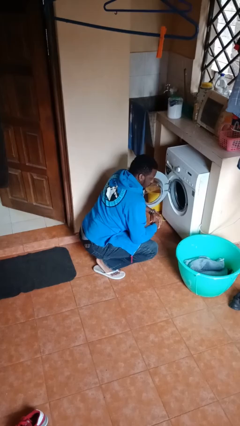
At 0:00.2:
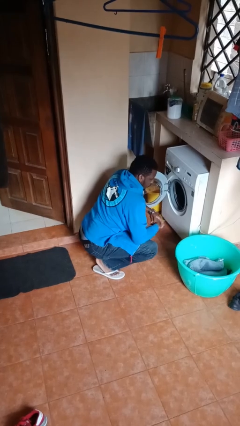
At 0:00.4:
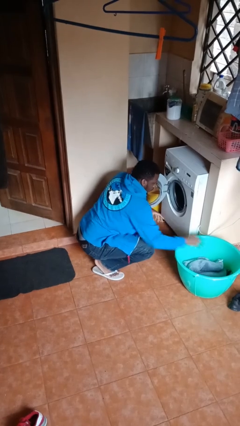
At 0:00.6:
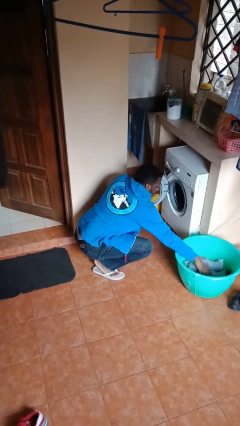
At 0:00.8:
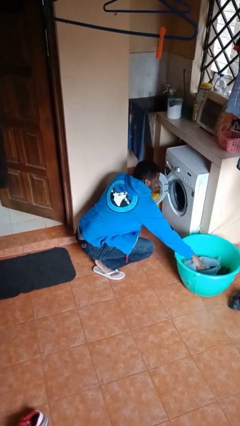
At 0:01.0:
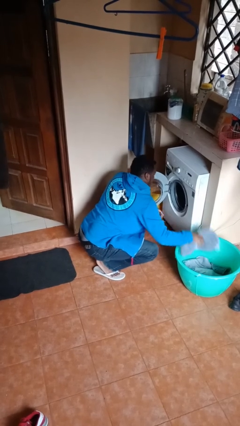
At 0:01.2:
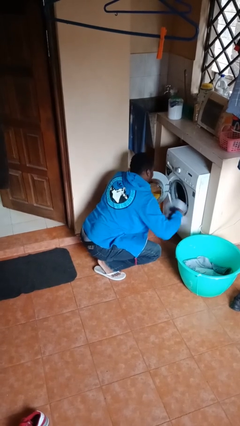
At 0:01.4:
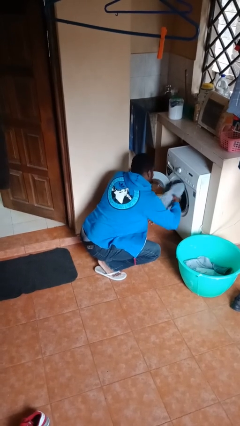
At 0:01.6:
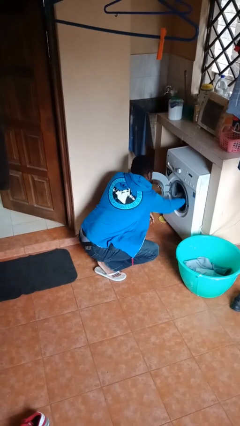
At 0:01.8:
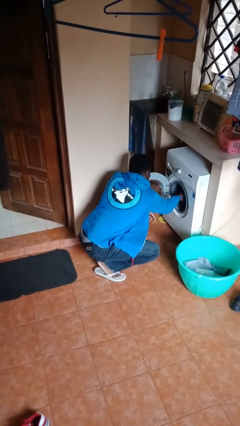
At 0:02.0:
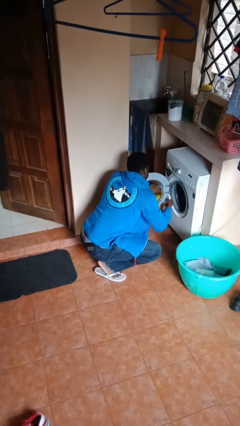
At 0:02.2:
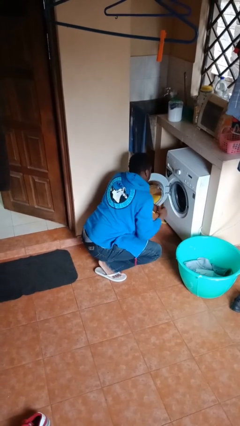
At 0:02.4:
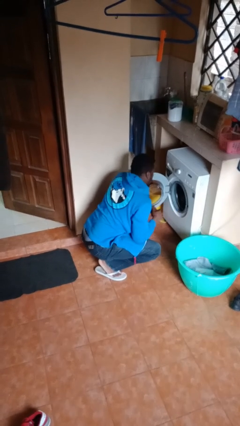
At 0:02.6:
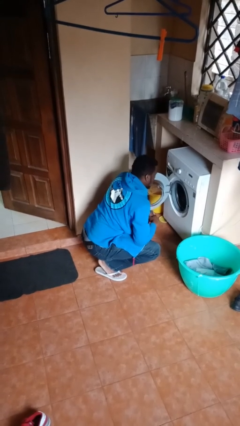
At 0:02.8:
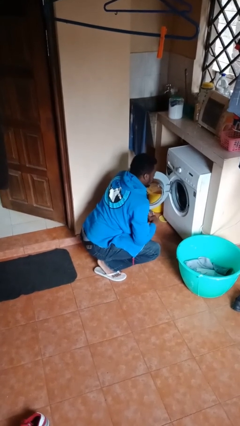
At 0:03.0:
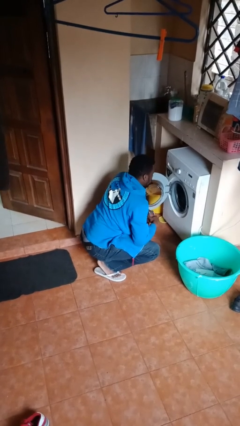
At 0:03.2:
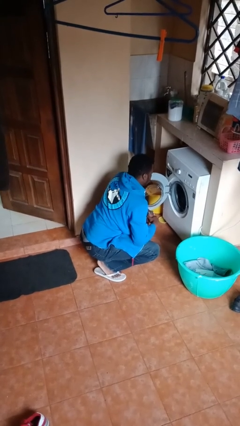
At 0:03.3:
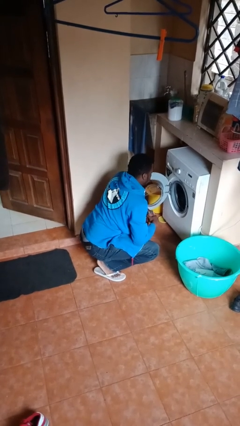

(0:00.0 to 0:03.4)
person loads clotheswasher

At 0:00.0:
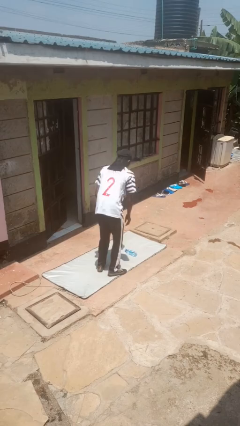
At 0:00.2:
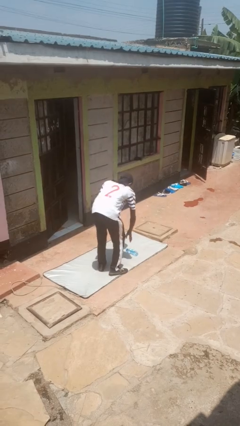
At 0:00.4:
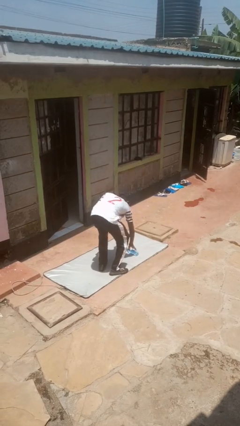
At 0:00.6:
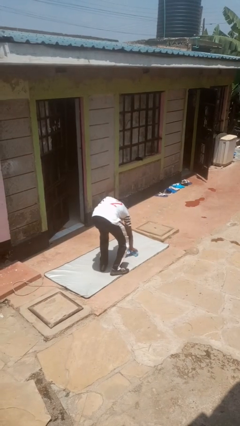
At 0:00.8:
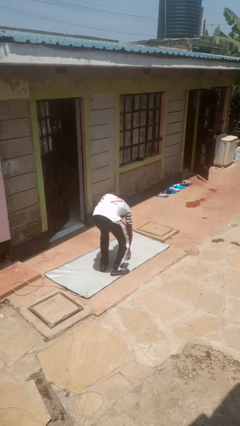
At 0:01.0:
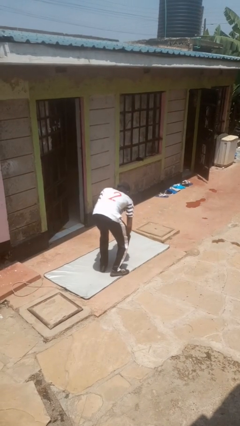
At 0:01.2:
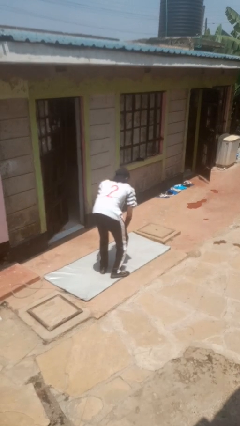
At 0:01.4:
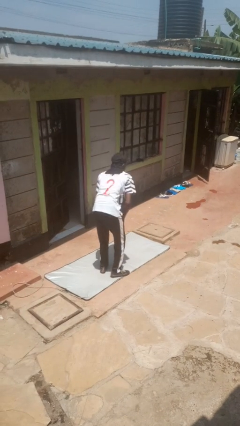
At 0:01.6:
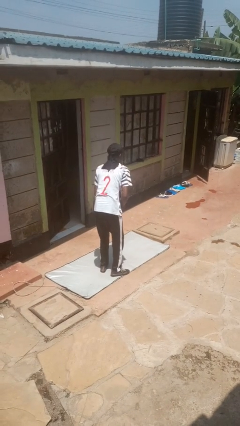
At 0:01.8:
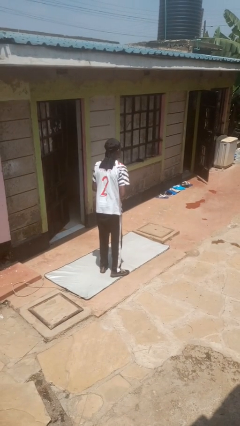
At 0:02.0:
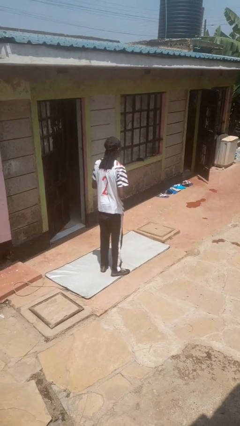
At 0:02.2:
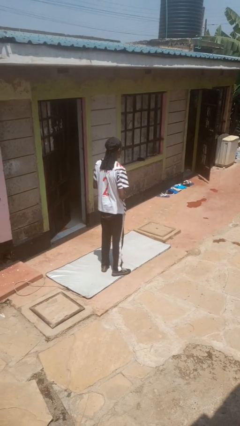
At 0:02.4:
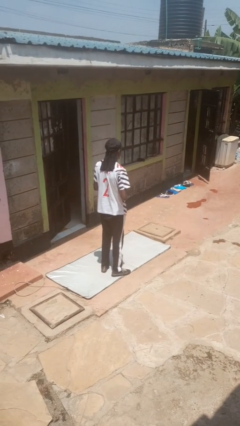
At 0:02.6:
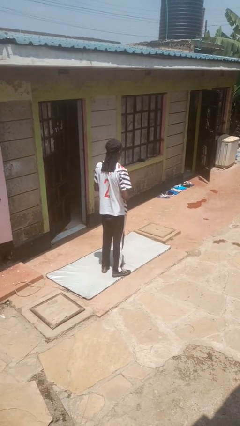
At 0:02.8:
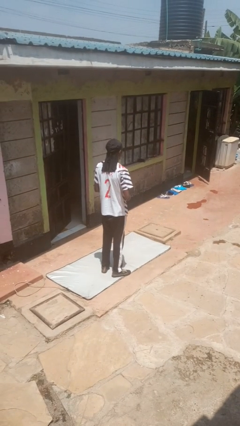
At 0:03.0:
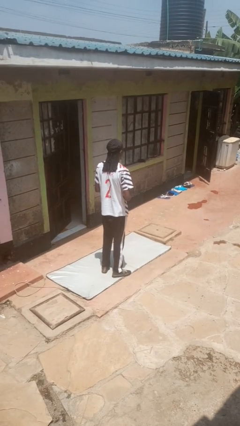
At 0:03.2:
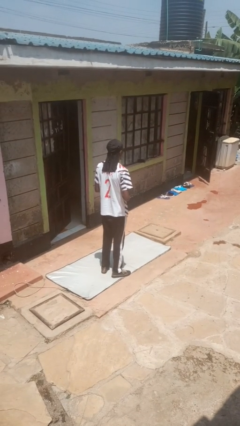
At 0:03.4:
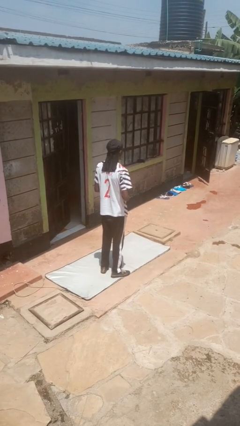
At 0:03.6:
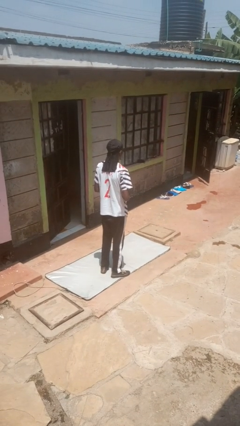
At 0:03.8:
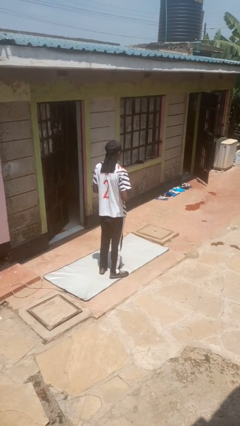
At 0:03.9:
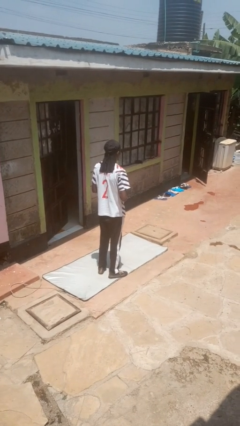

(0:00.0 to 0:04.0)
person picks up object from floor

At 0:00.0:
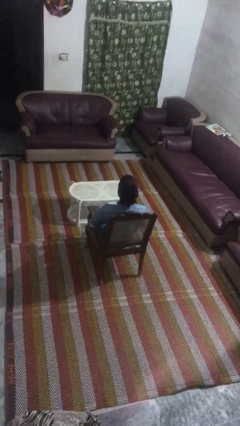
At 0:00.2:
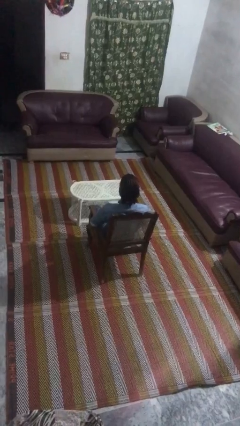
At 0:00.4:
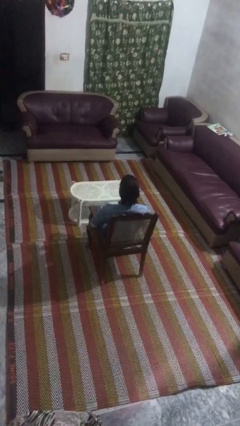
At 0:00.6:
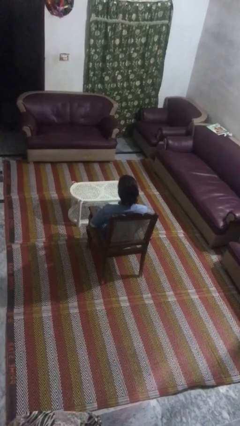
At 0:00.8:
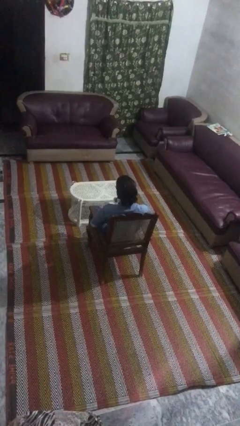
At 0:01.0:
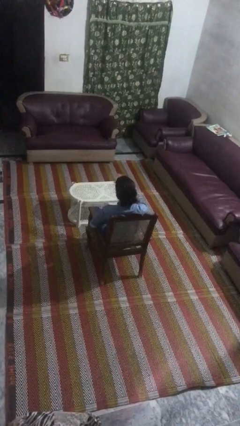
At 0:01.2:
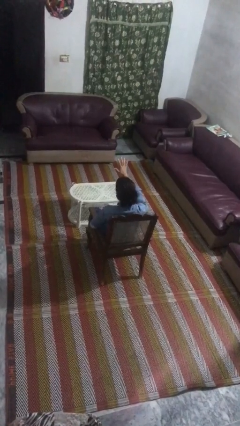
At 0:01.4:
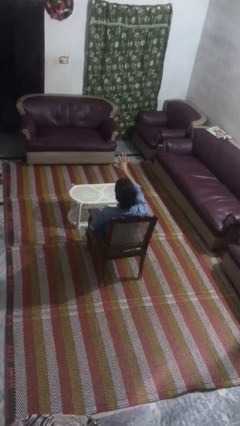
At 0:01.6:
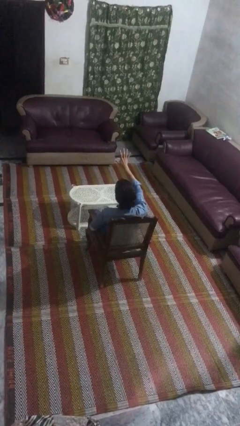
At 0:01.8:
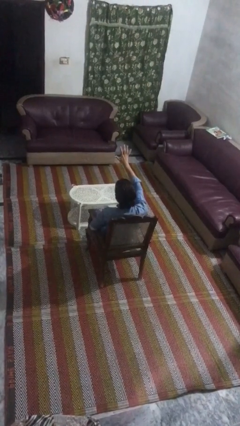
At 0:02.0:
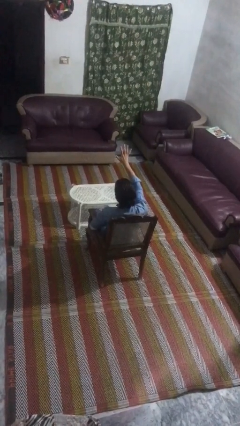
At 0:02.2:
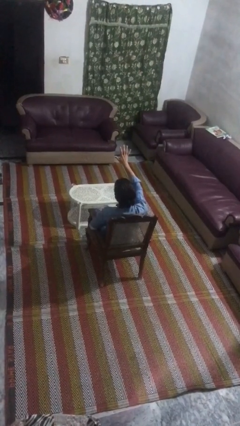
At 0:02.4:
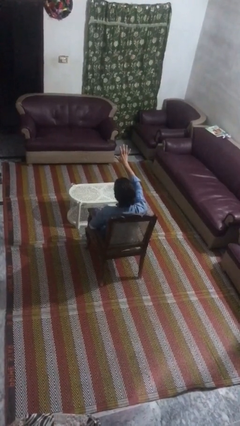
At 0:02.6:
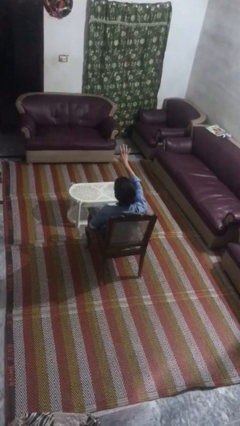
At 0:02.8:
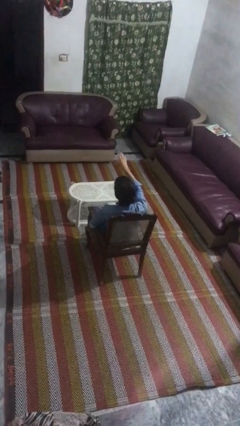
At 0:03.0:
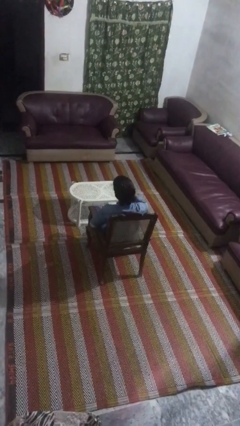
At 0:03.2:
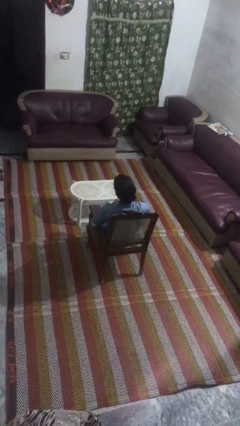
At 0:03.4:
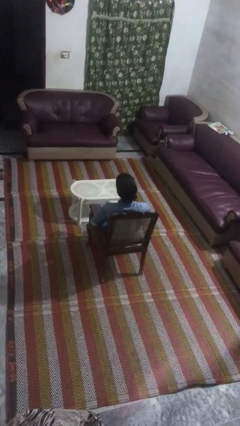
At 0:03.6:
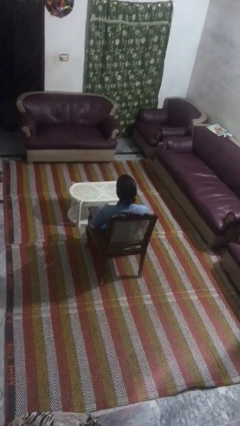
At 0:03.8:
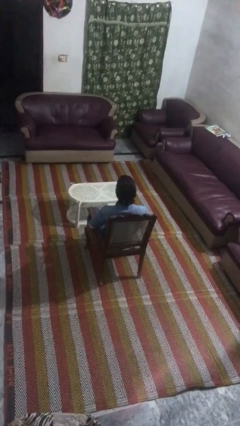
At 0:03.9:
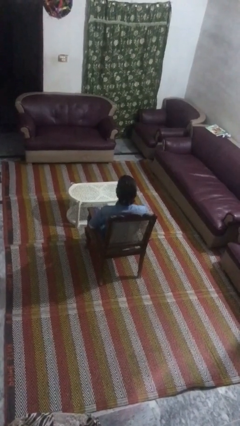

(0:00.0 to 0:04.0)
person gestures number five

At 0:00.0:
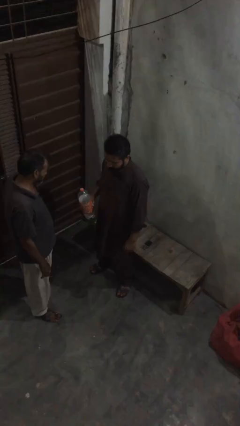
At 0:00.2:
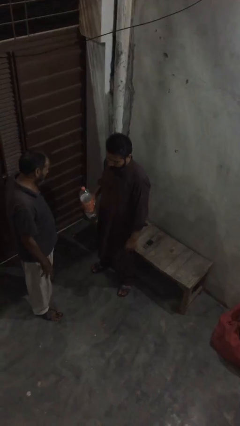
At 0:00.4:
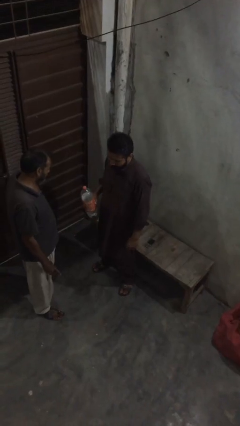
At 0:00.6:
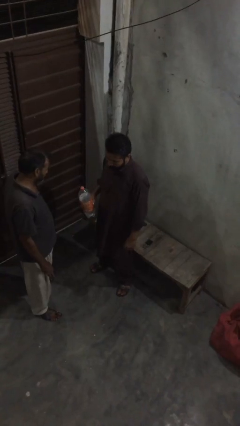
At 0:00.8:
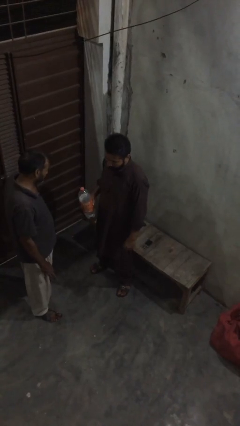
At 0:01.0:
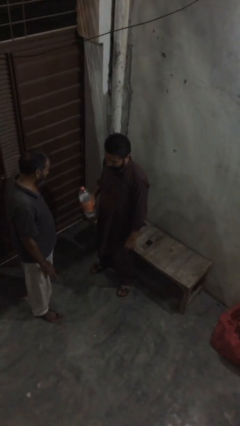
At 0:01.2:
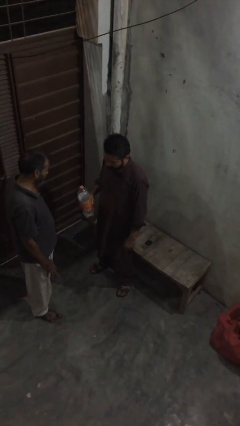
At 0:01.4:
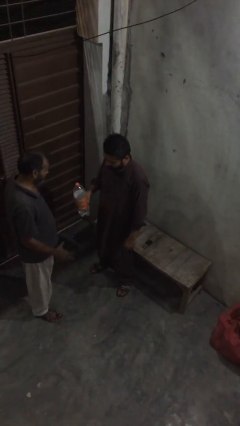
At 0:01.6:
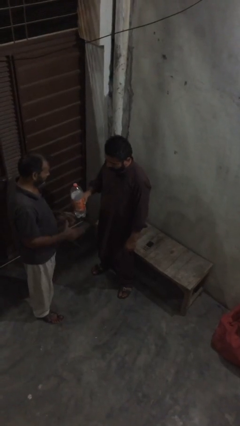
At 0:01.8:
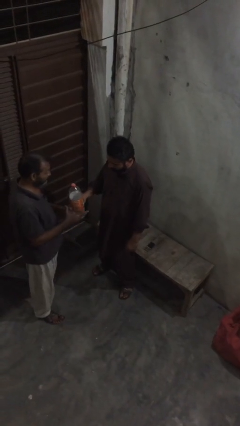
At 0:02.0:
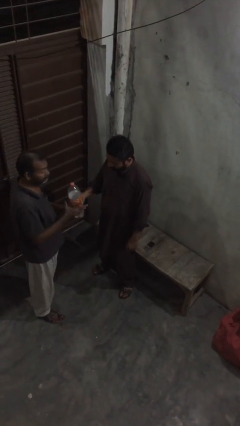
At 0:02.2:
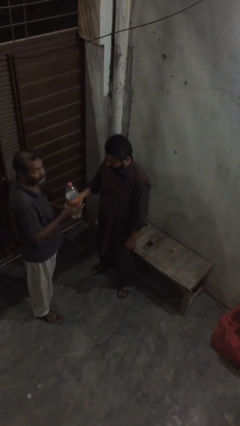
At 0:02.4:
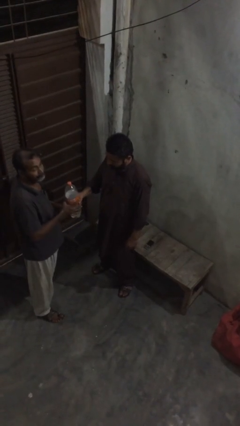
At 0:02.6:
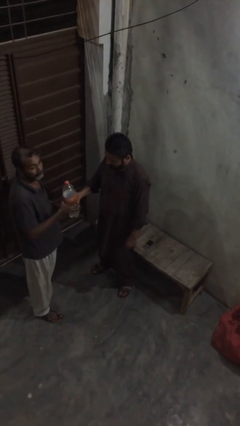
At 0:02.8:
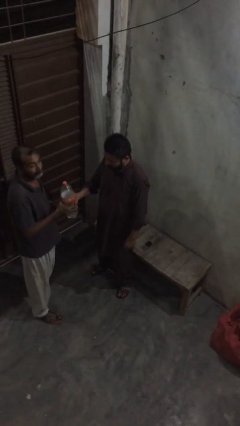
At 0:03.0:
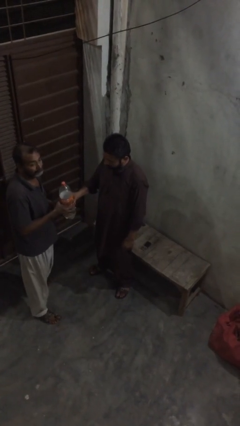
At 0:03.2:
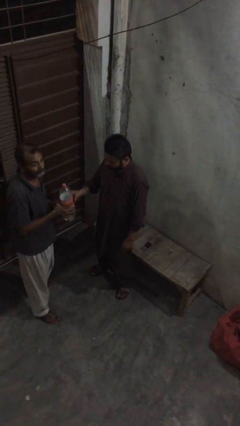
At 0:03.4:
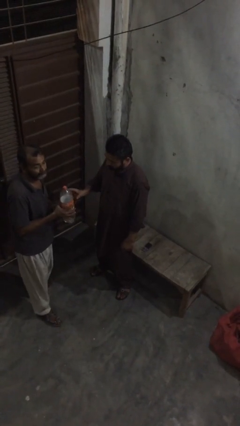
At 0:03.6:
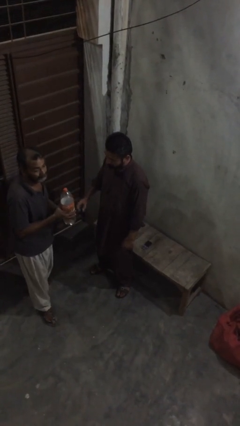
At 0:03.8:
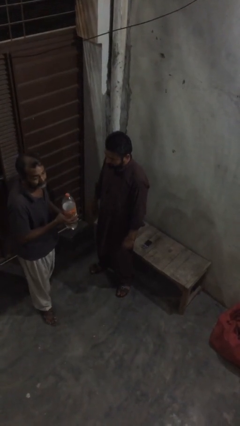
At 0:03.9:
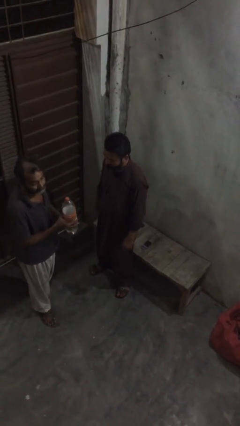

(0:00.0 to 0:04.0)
person transfers object to person

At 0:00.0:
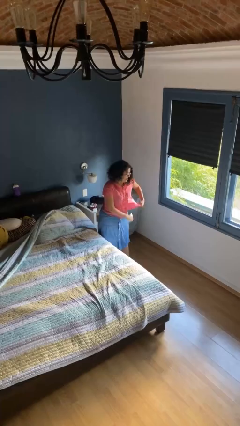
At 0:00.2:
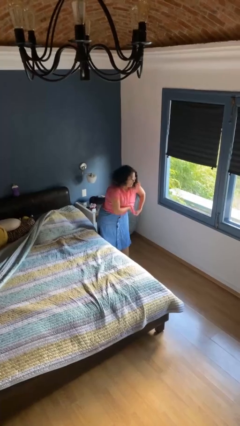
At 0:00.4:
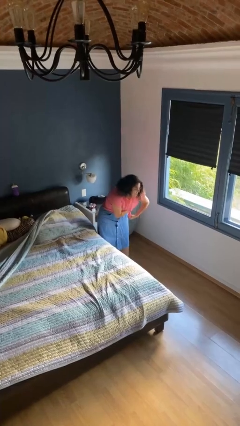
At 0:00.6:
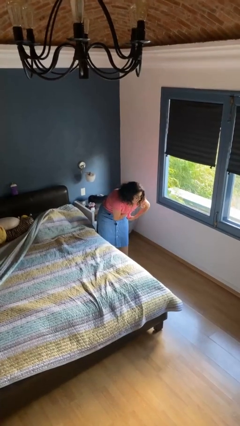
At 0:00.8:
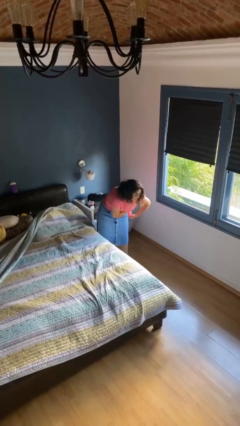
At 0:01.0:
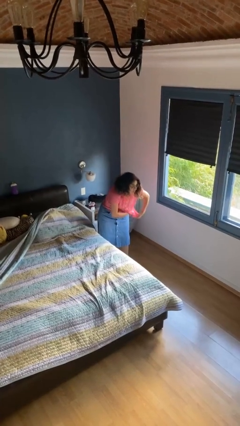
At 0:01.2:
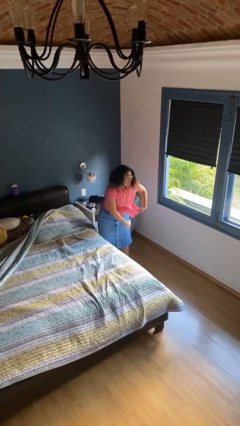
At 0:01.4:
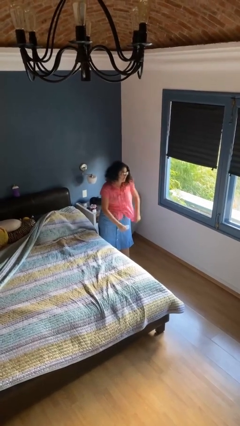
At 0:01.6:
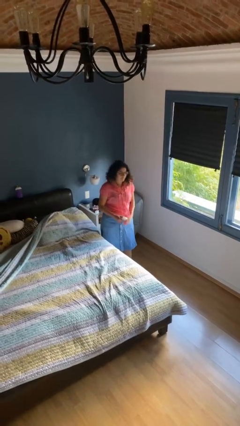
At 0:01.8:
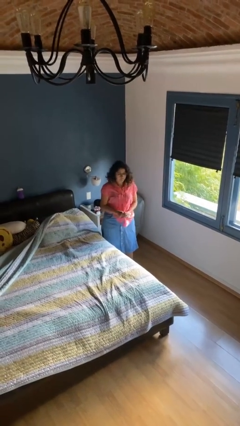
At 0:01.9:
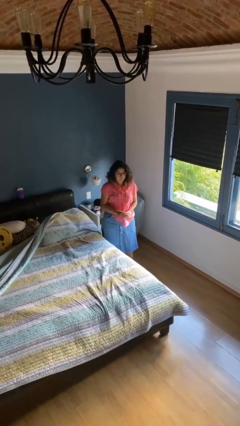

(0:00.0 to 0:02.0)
person applies deodorant
